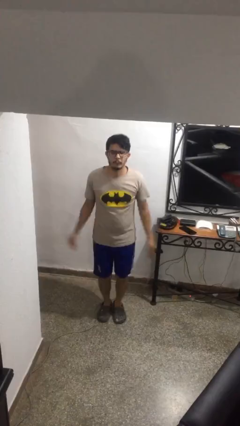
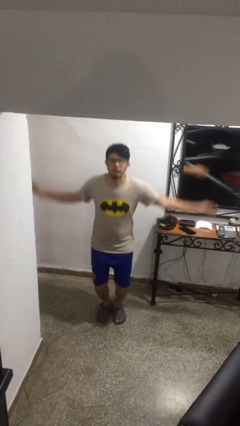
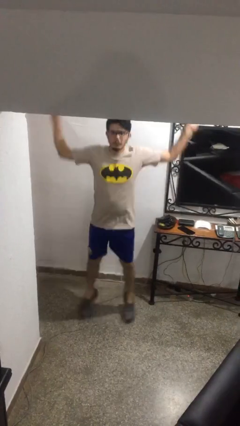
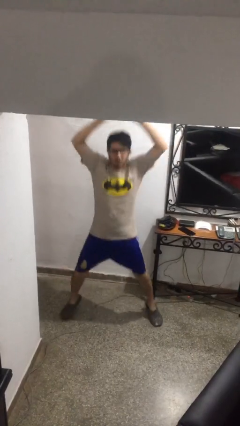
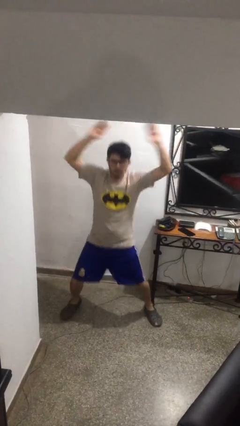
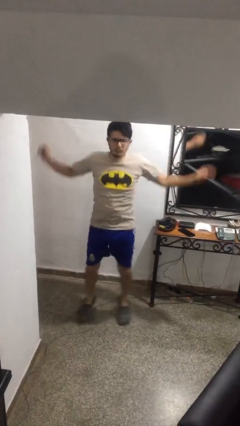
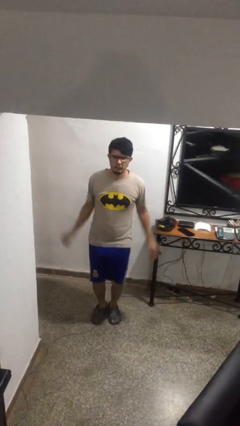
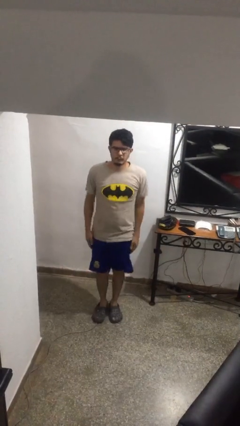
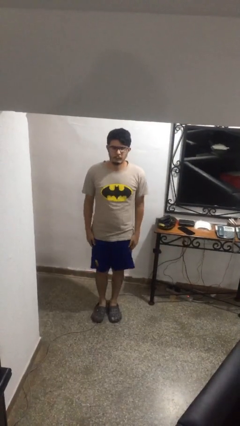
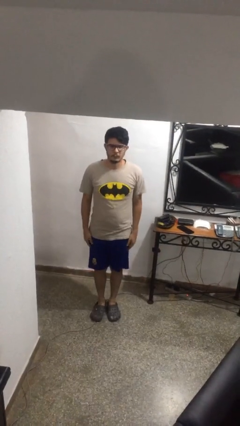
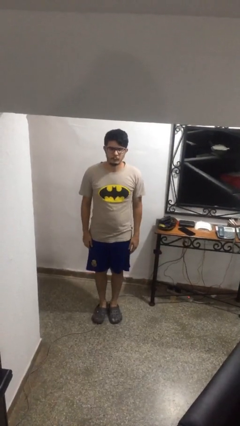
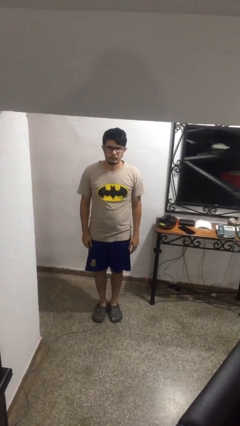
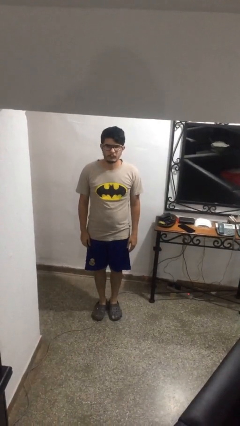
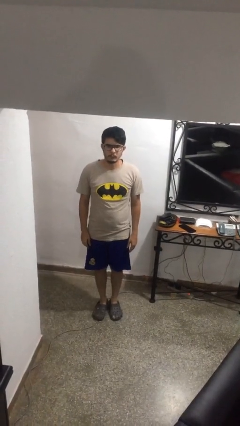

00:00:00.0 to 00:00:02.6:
person exercises with jumping jacks

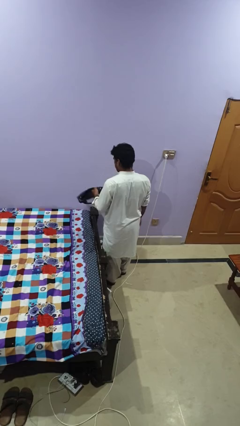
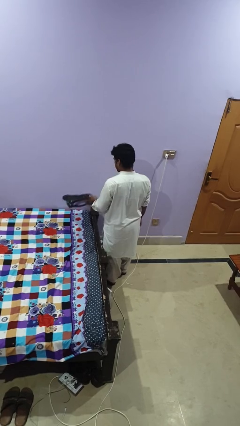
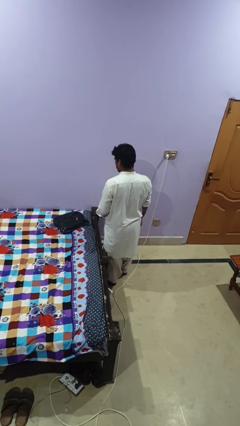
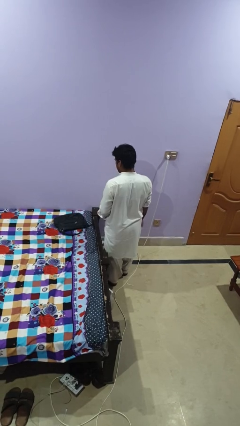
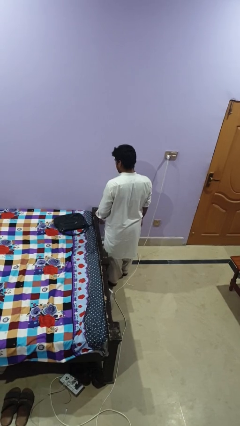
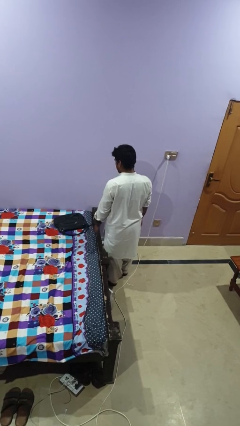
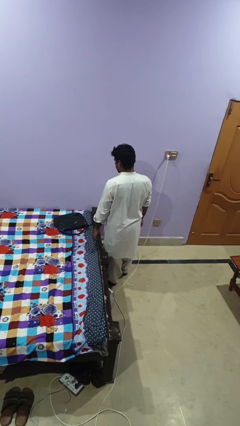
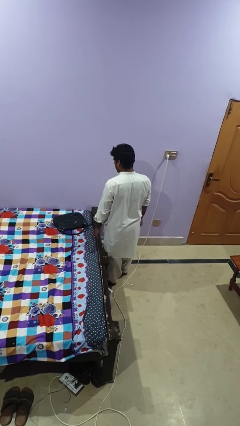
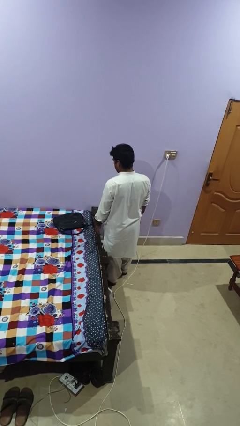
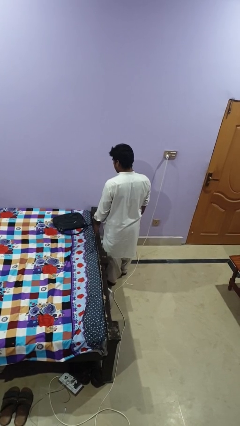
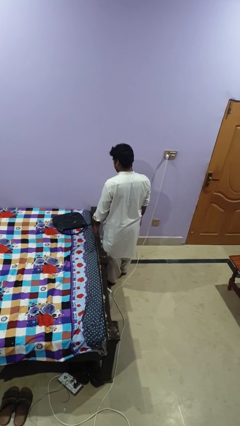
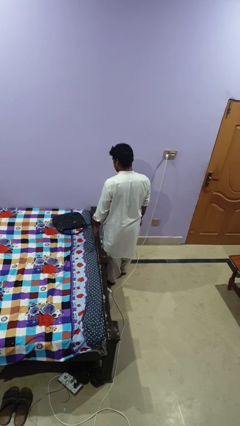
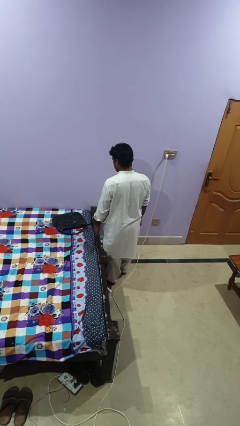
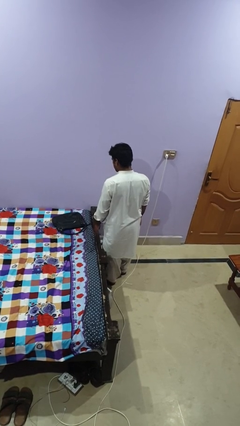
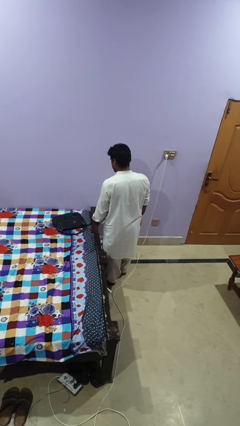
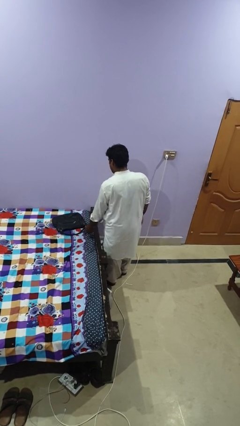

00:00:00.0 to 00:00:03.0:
person throws object on bed

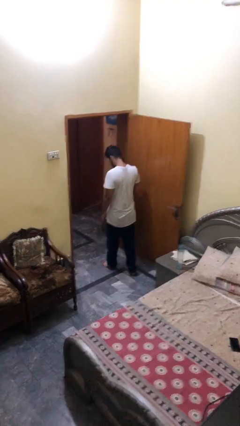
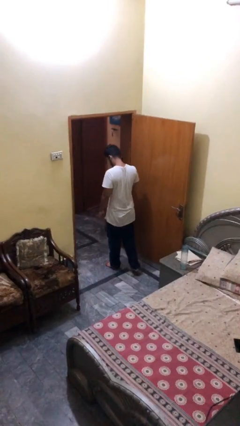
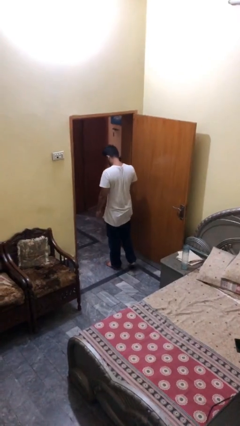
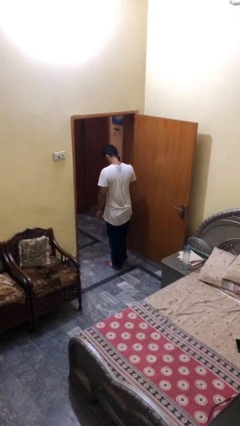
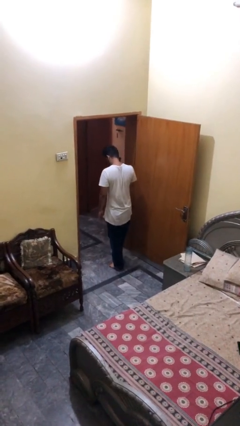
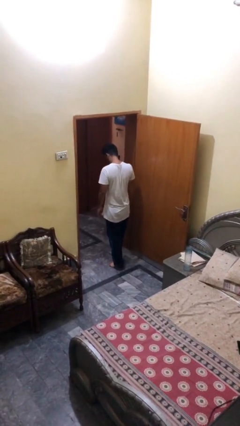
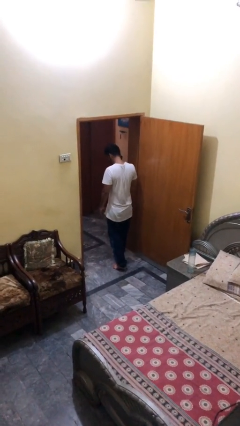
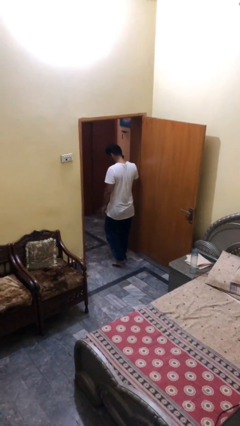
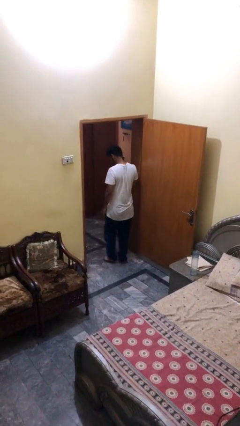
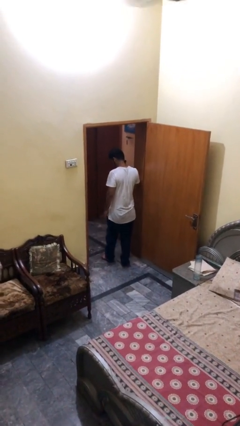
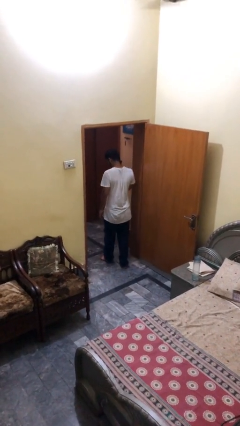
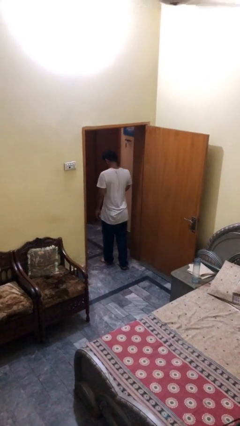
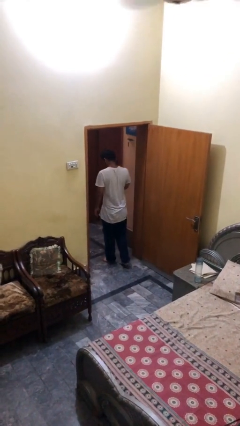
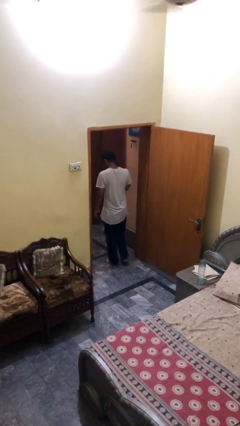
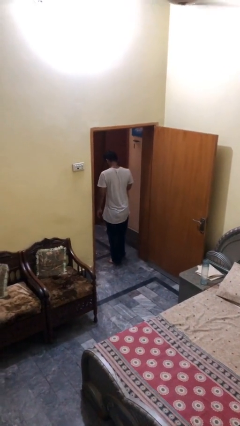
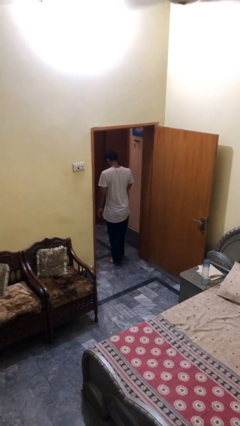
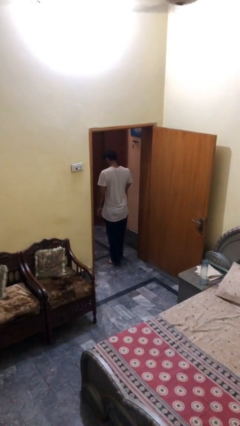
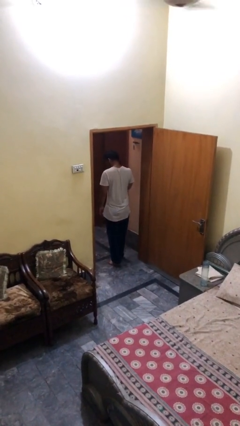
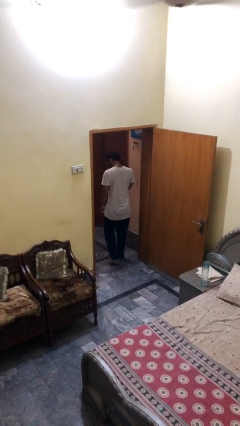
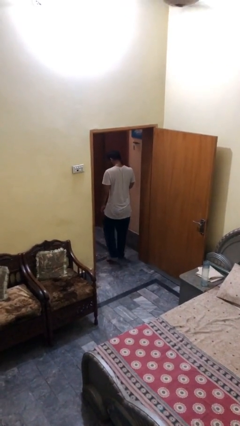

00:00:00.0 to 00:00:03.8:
person exits scene through structure

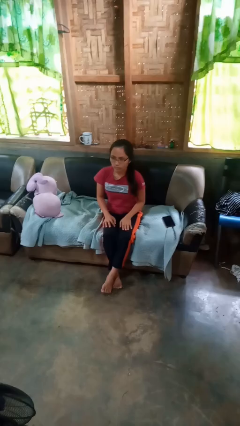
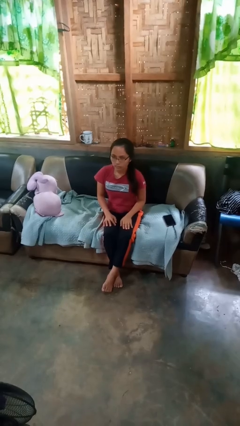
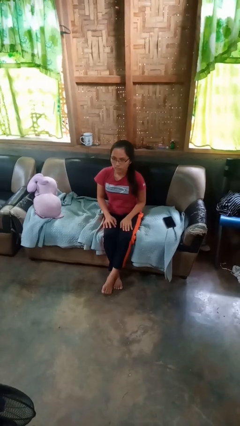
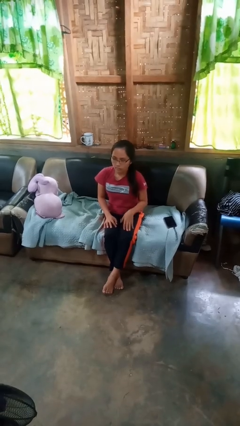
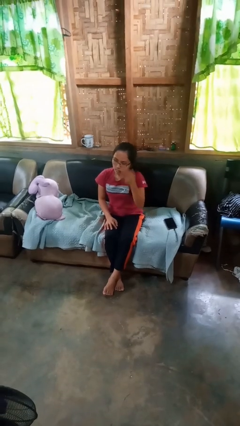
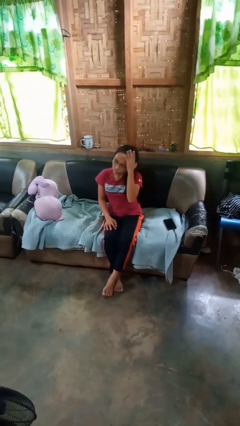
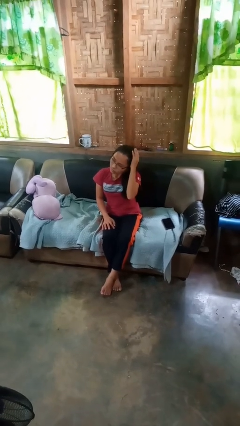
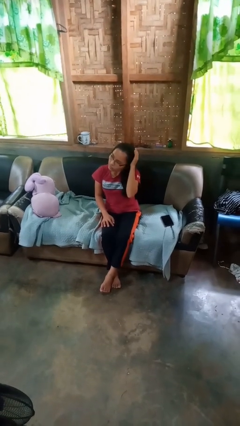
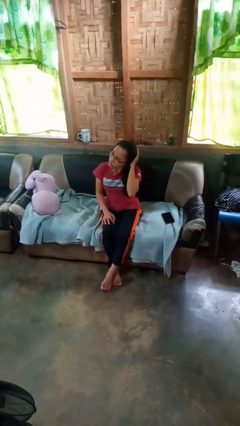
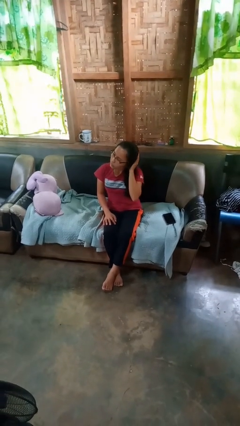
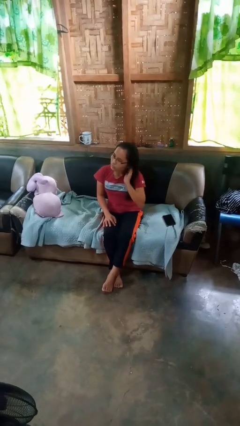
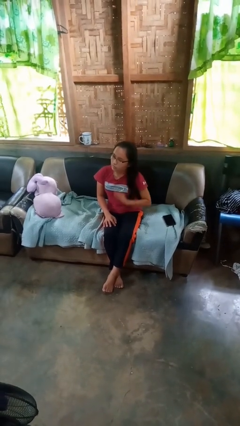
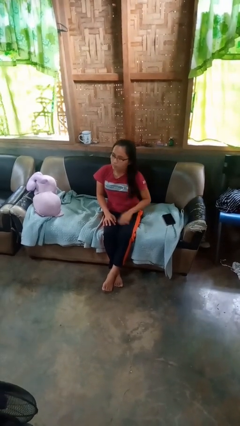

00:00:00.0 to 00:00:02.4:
person strokes hair

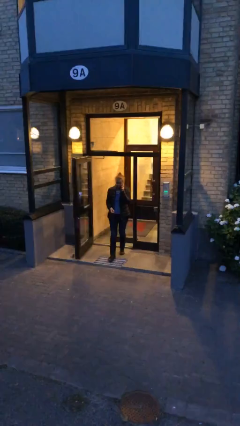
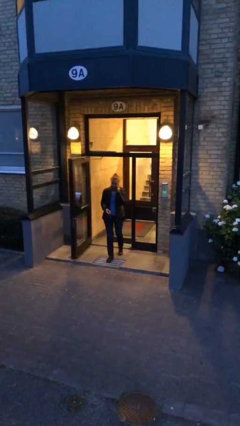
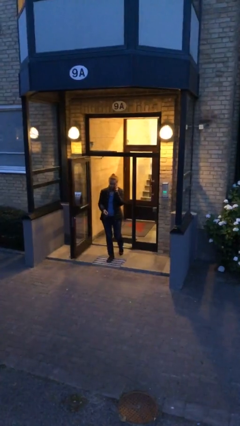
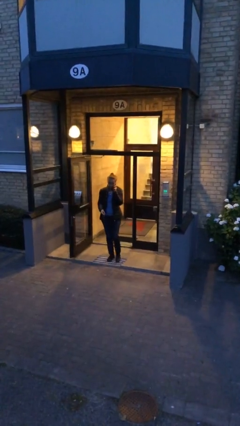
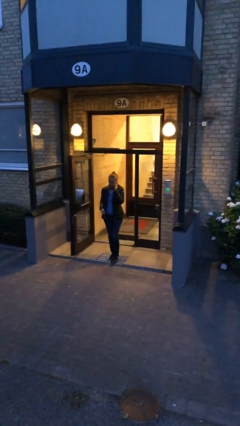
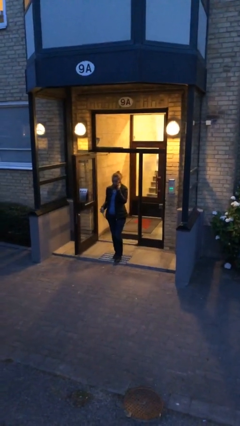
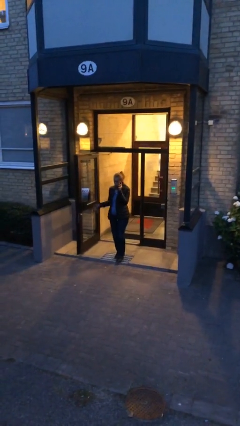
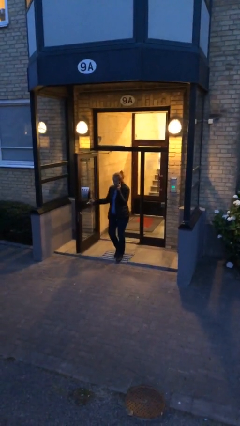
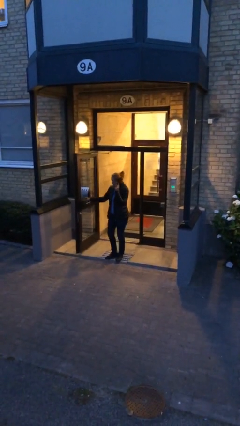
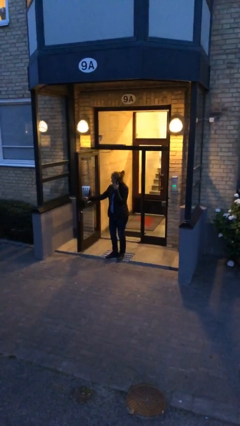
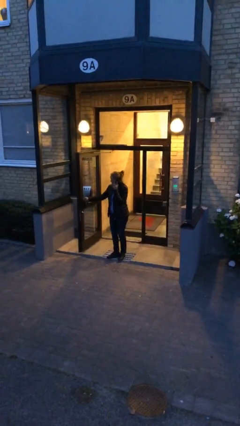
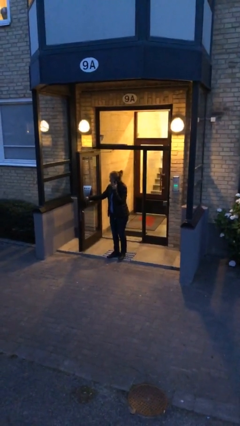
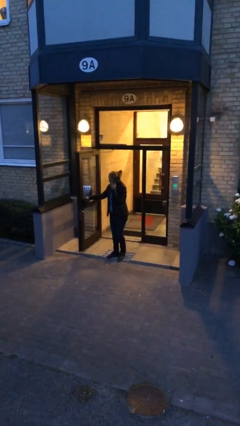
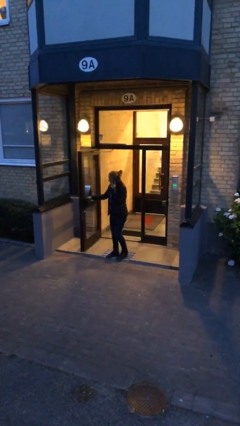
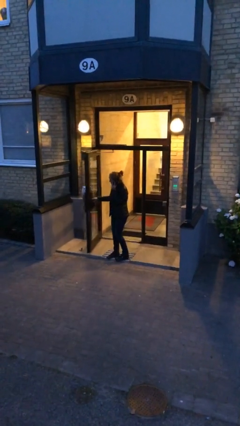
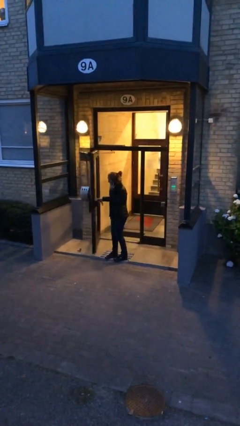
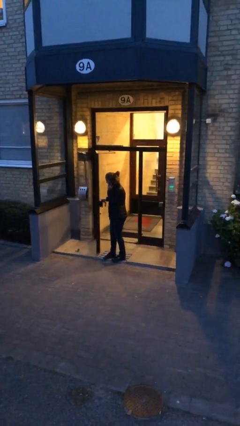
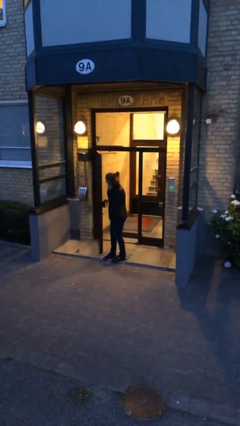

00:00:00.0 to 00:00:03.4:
person enters scene through structure

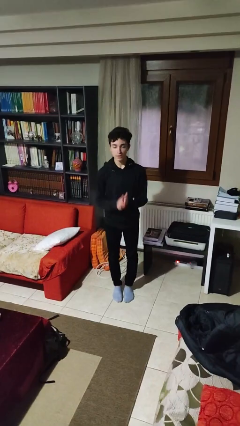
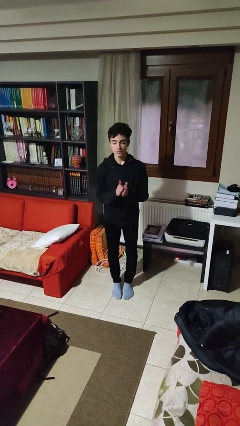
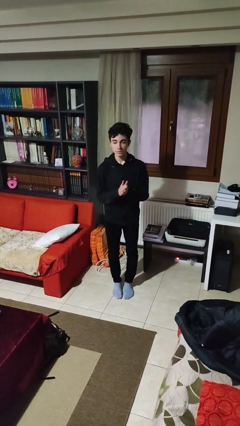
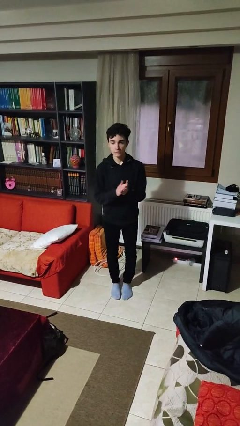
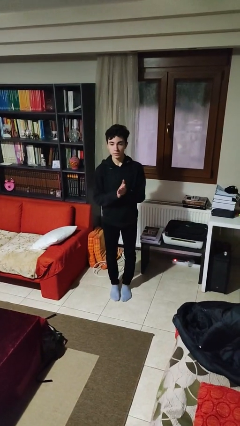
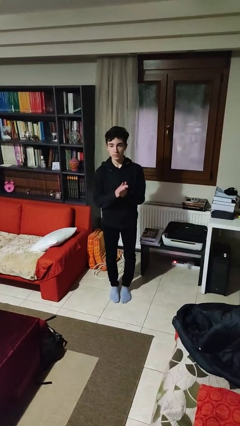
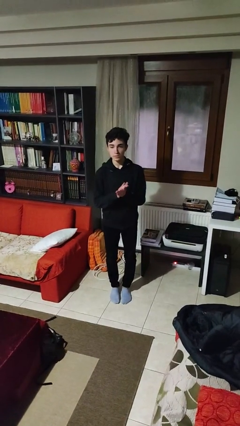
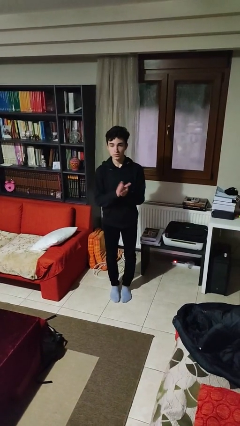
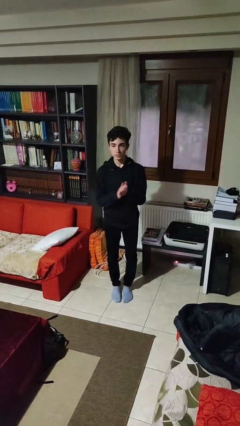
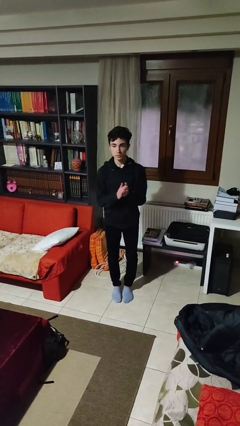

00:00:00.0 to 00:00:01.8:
person claps hands

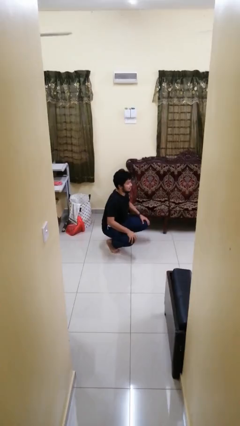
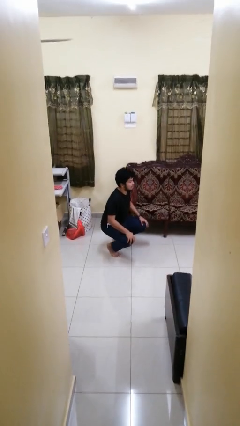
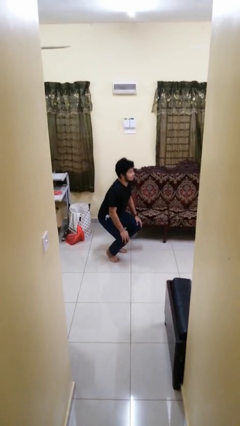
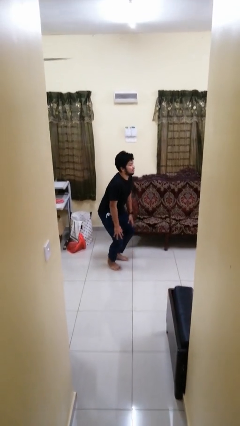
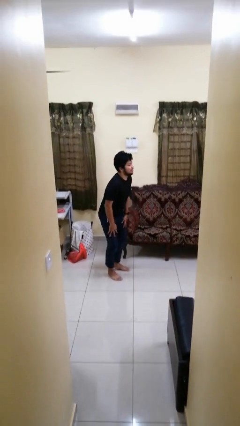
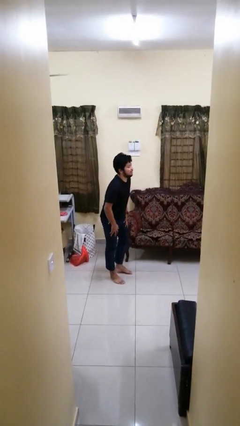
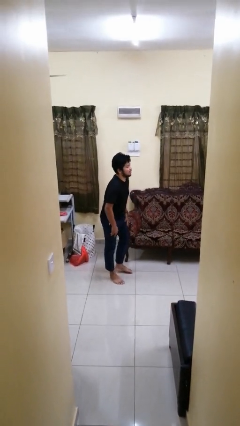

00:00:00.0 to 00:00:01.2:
person stands up
